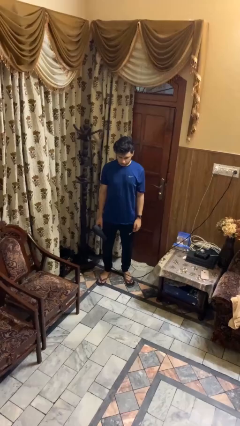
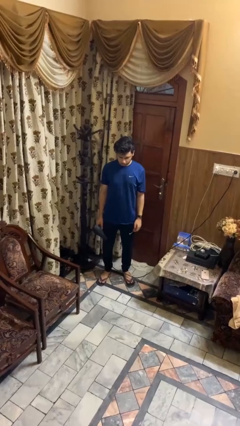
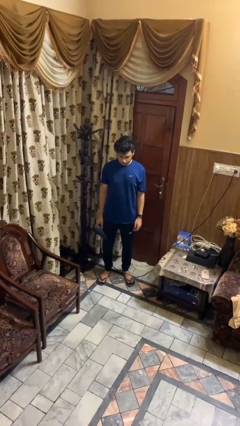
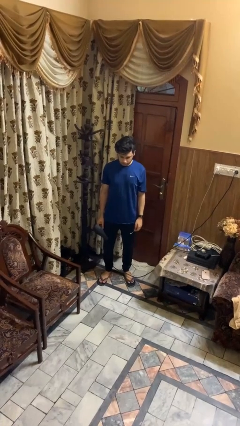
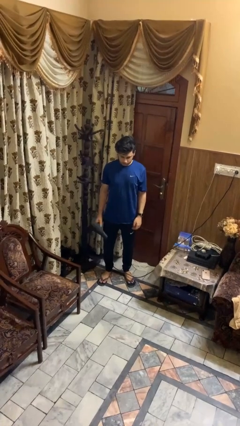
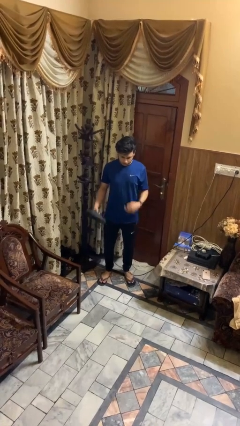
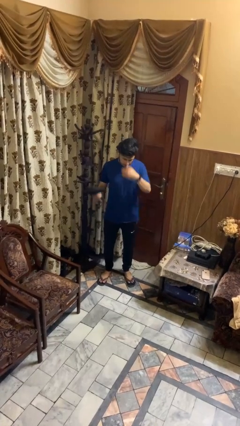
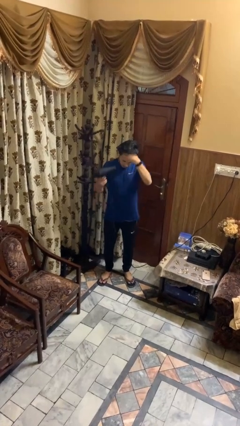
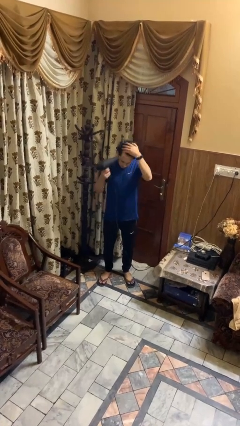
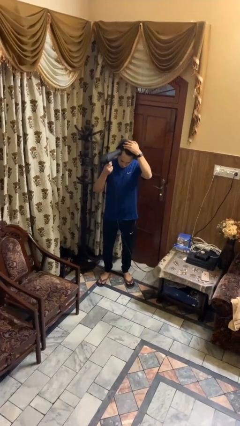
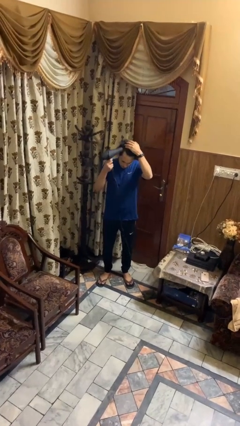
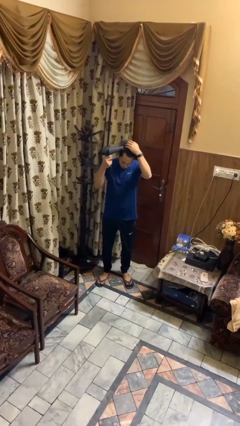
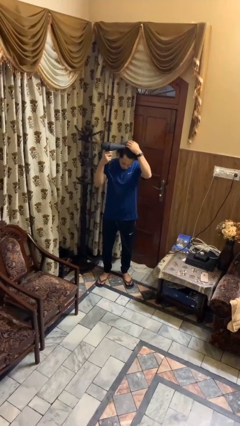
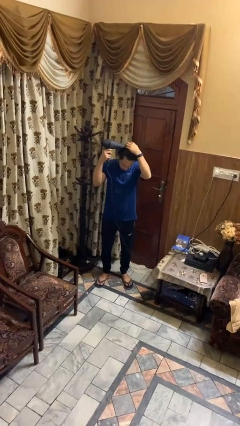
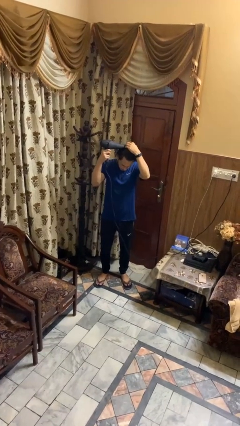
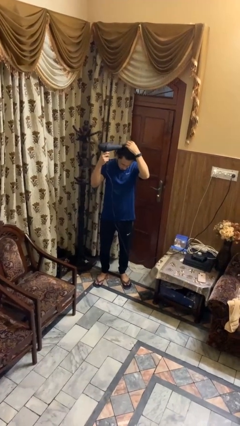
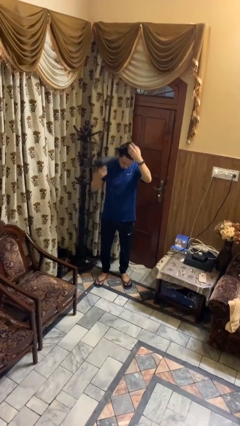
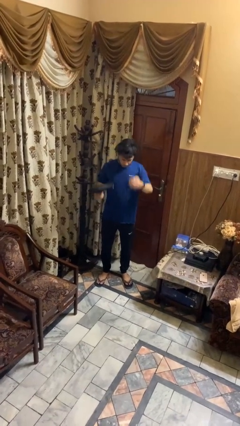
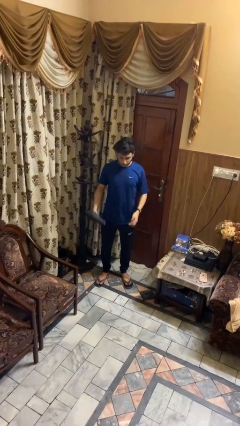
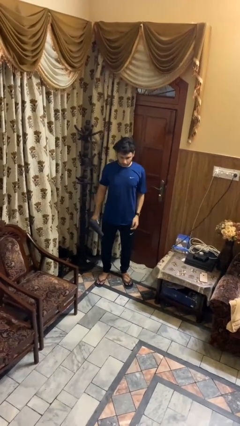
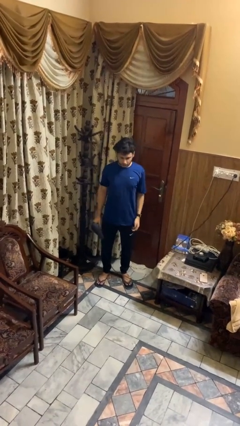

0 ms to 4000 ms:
person dries hair with hairdryer

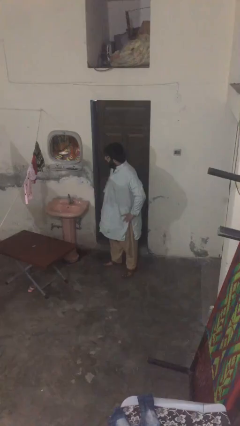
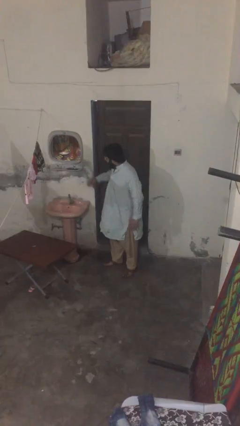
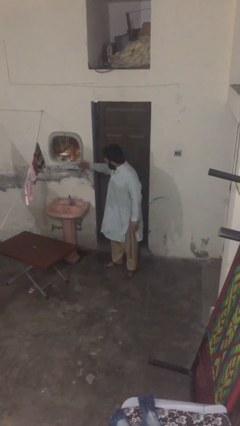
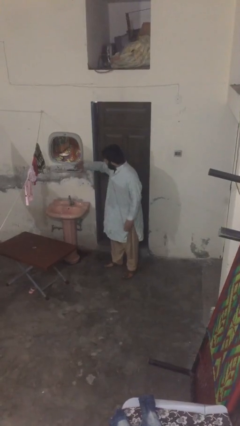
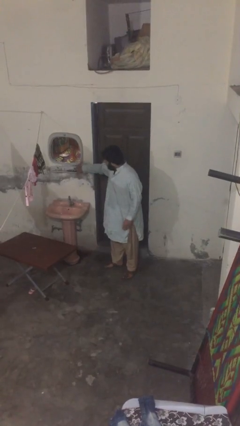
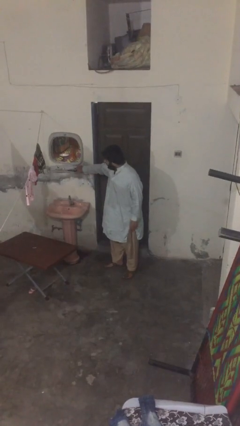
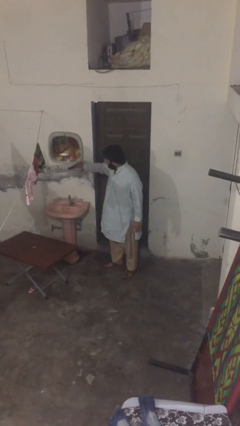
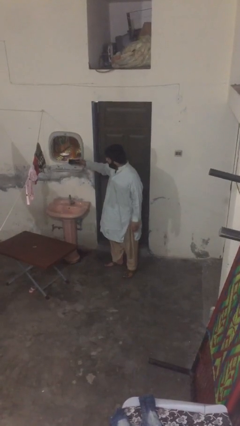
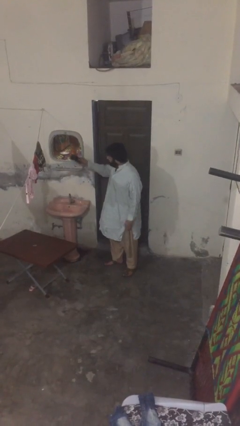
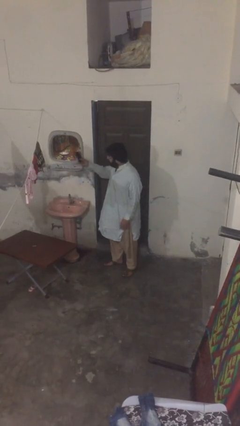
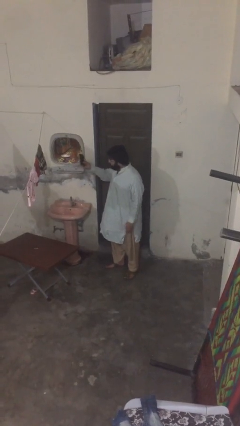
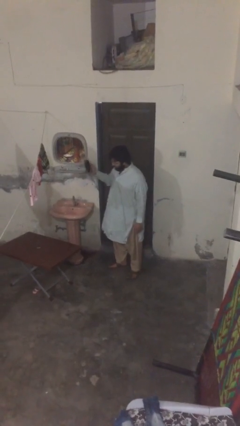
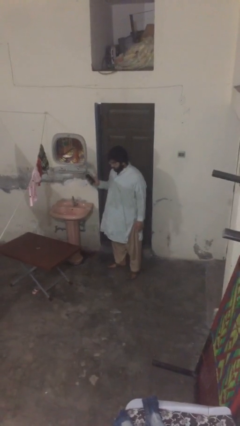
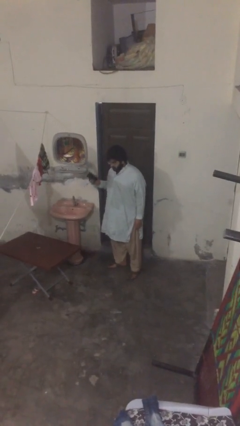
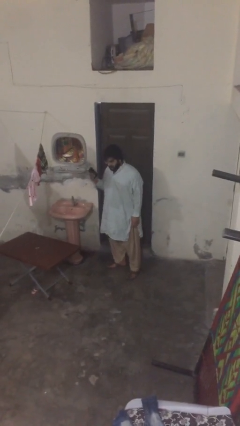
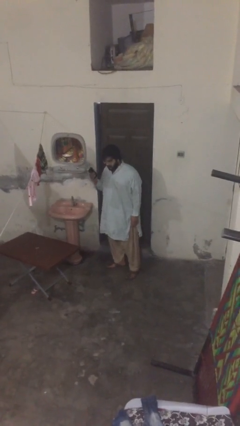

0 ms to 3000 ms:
person picks up object from shelf

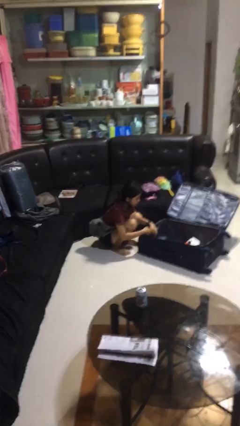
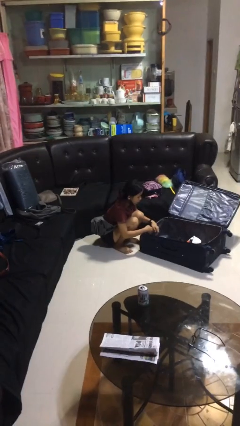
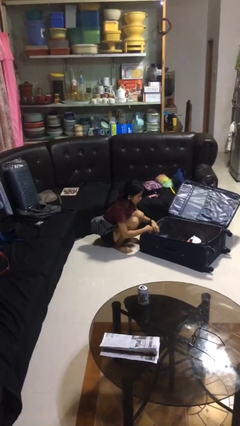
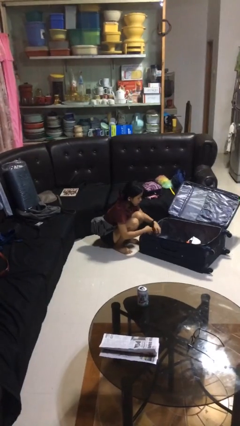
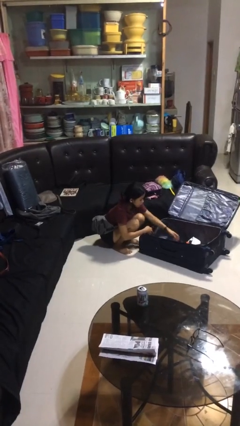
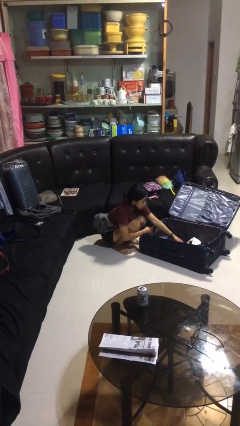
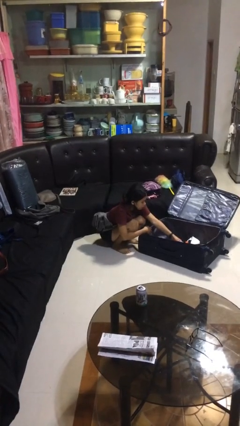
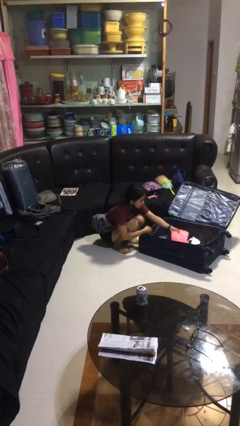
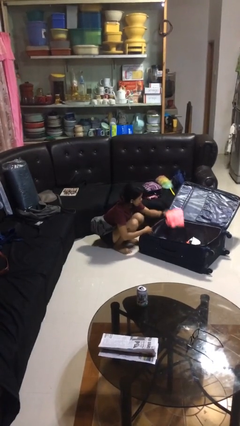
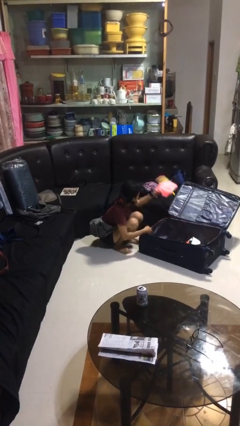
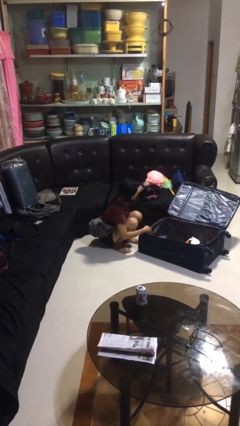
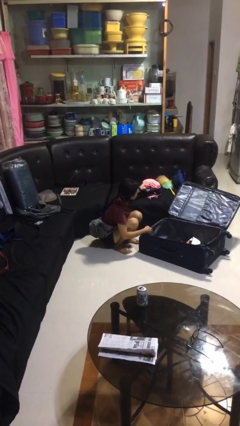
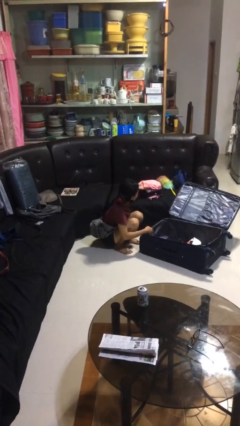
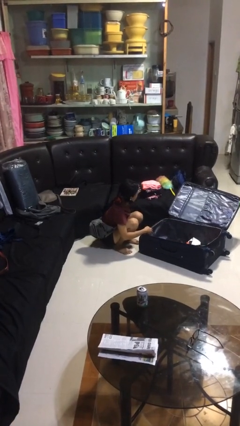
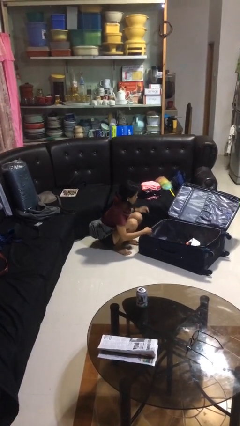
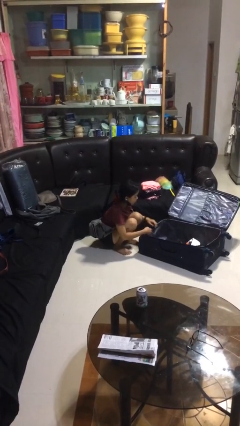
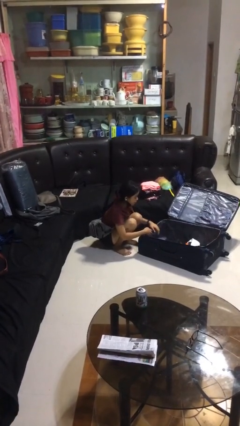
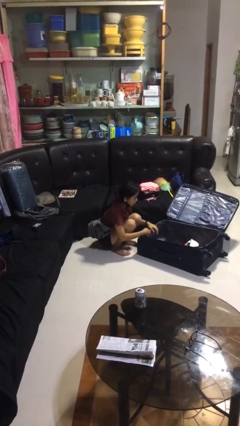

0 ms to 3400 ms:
person loads clothes into suitcase

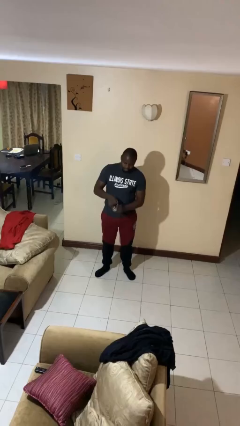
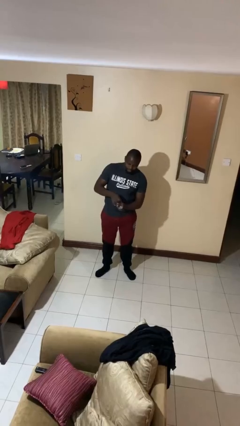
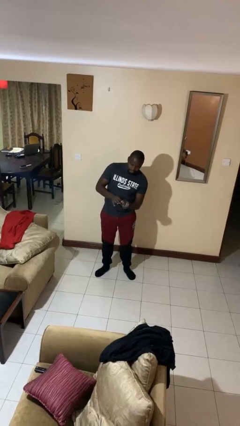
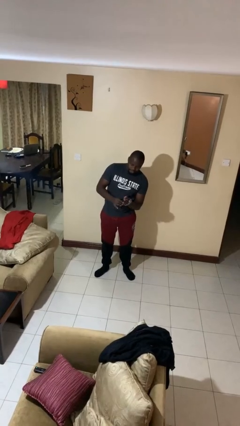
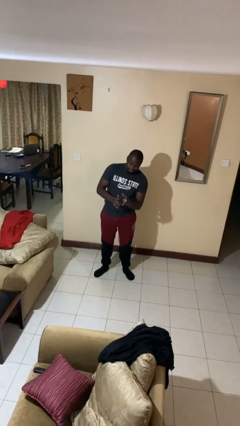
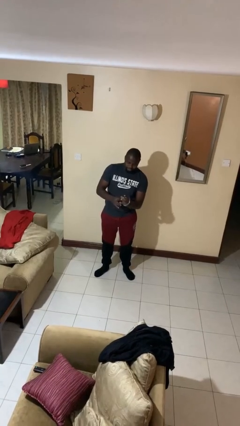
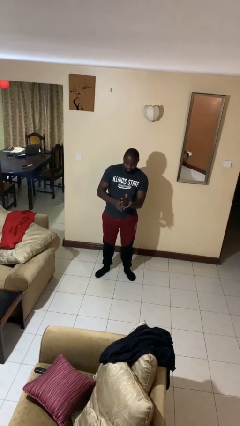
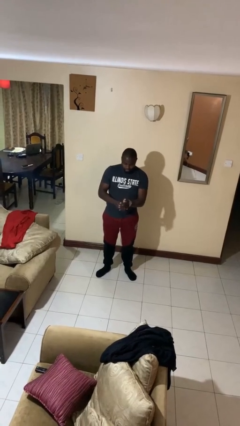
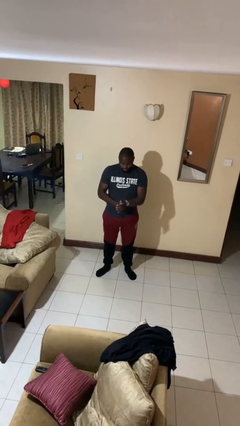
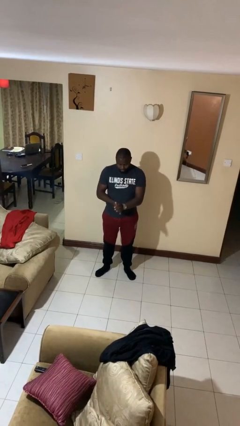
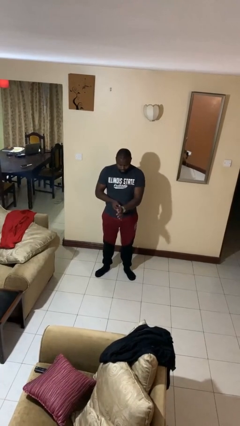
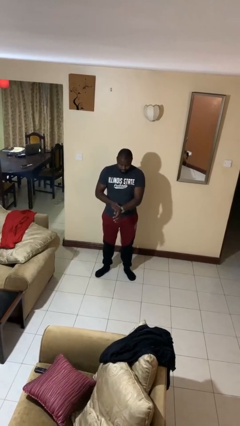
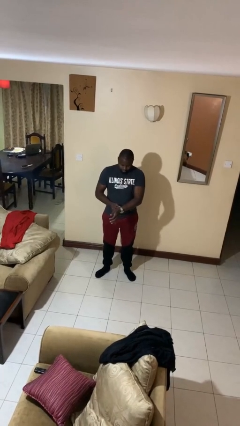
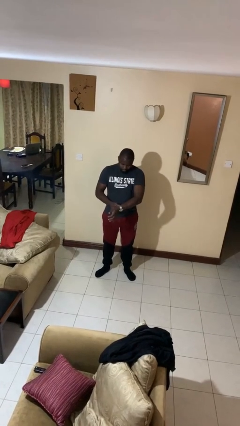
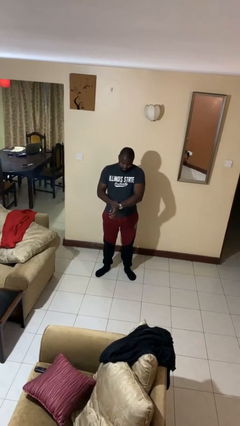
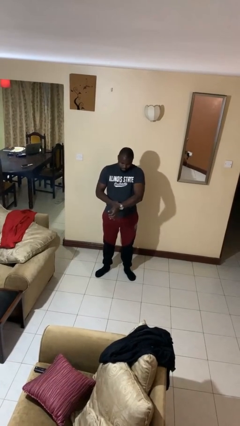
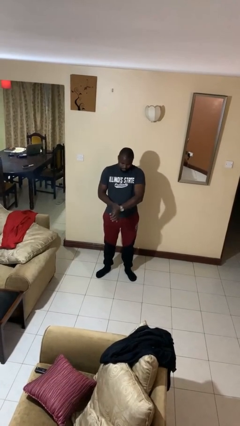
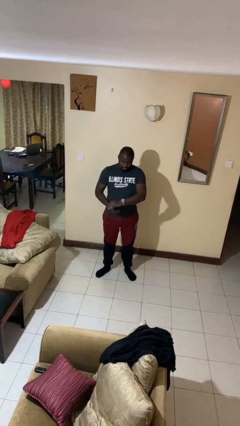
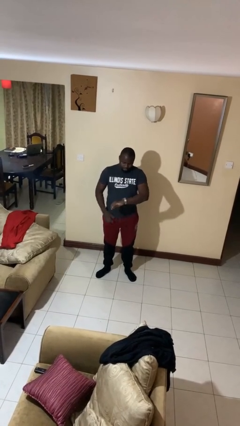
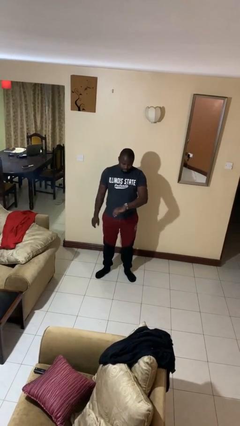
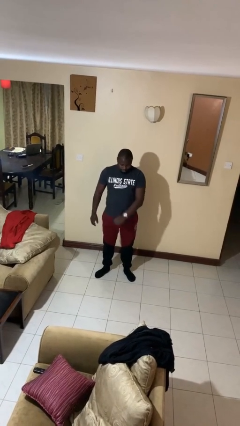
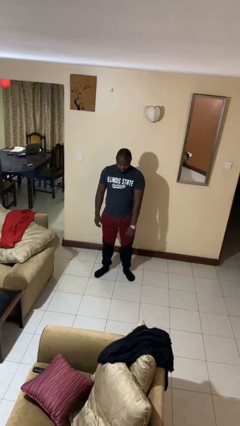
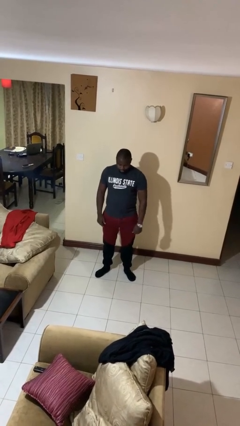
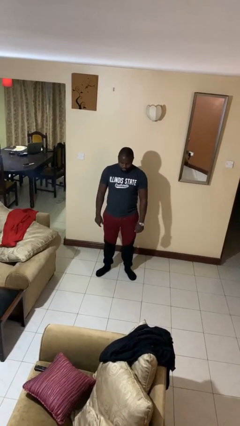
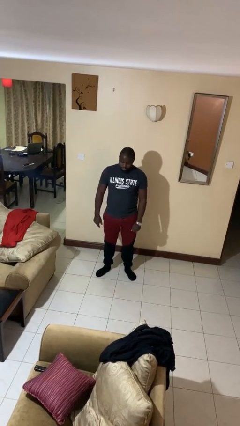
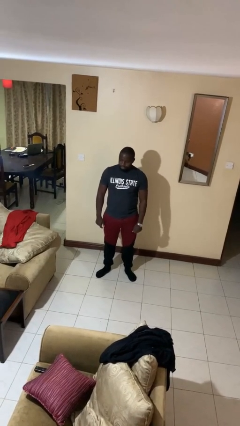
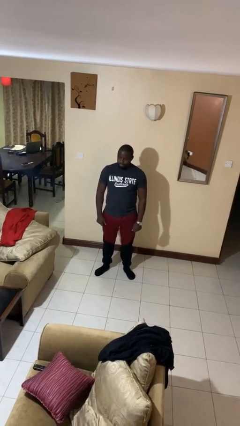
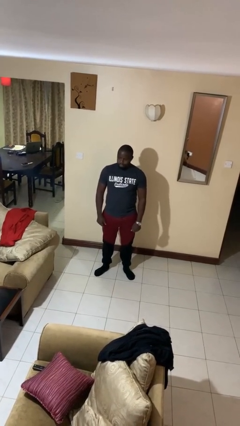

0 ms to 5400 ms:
person puts on wristwatch

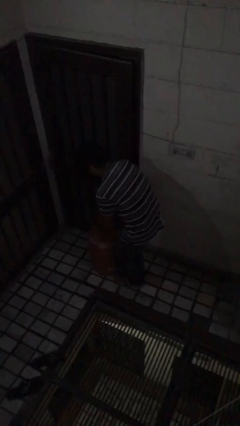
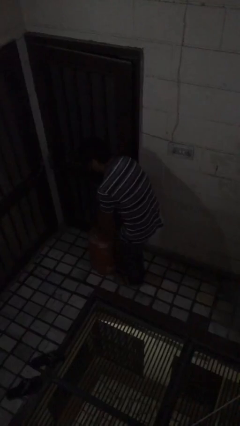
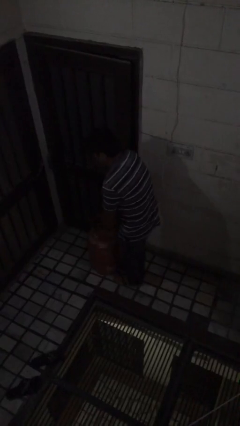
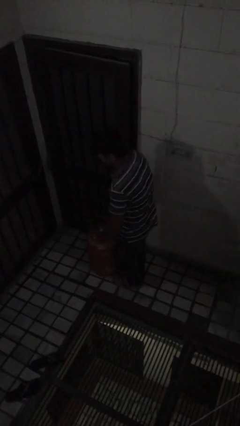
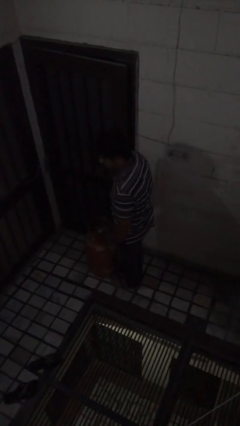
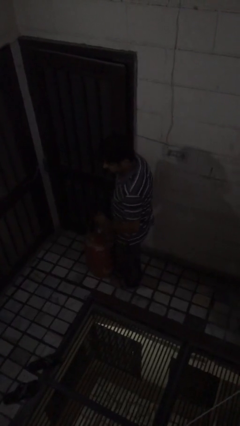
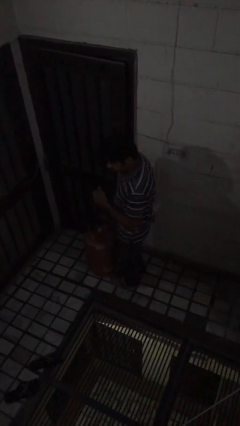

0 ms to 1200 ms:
person puts down object on floor

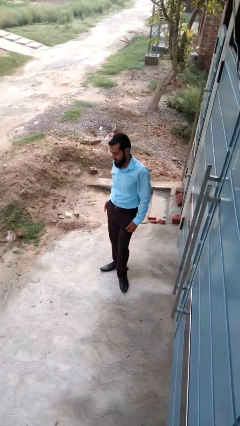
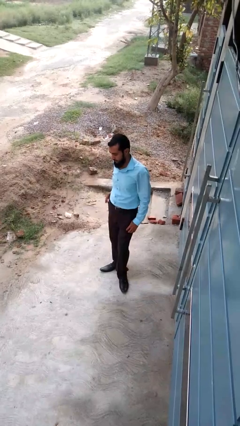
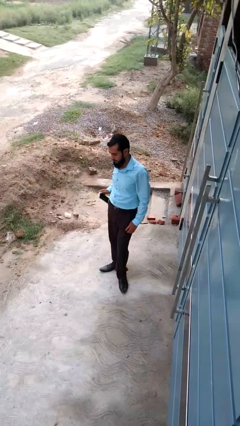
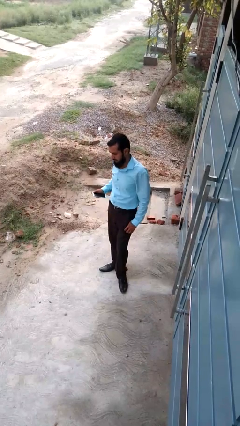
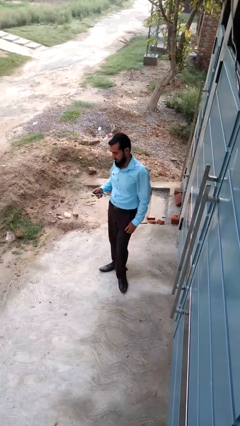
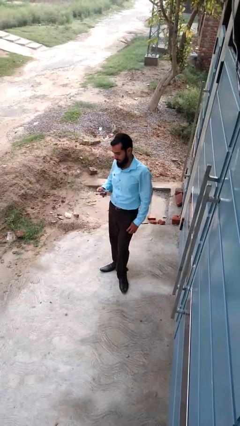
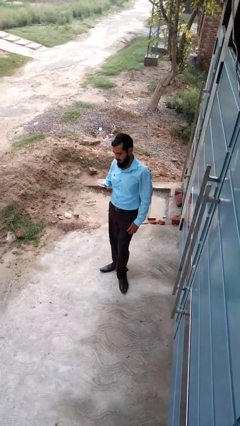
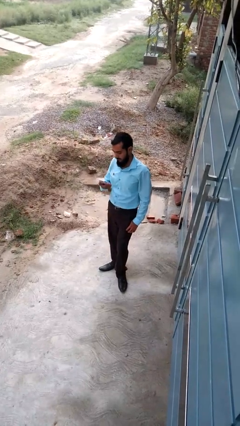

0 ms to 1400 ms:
person takes phone from pocket
